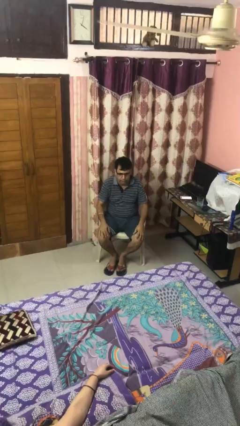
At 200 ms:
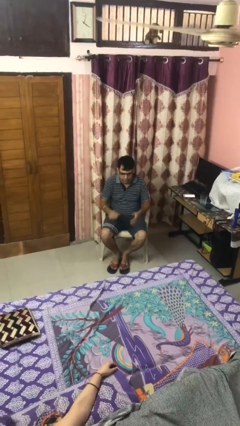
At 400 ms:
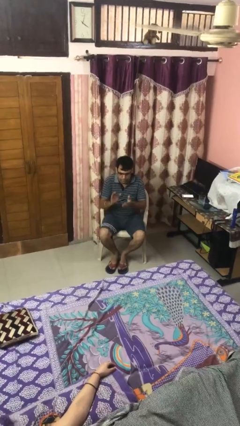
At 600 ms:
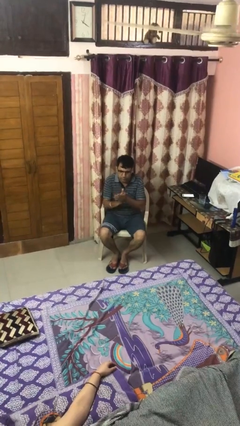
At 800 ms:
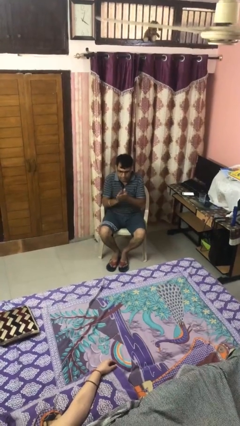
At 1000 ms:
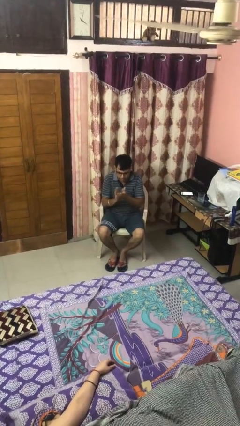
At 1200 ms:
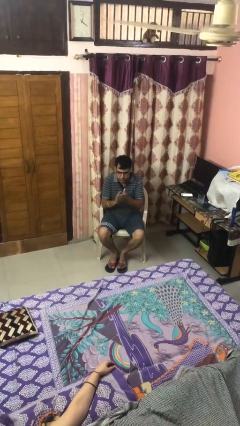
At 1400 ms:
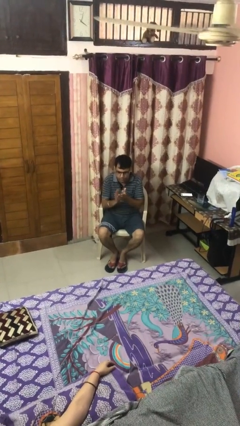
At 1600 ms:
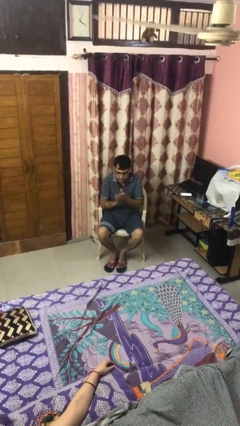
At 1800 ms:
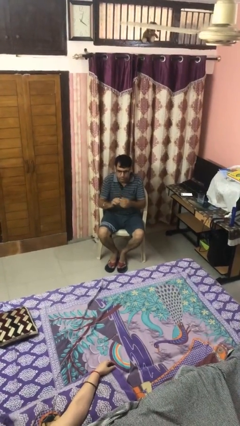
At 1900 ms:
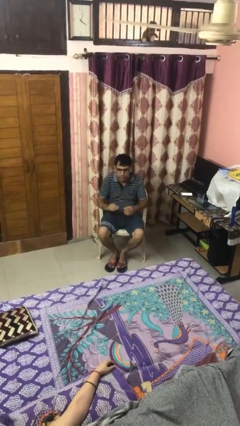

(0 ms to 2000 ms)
person claps hands

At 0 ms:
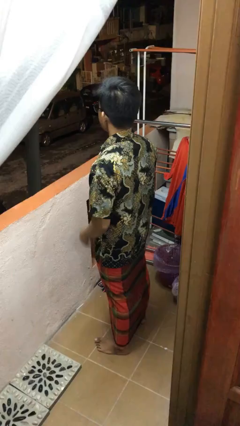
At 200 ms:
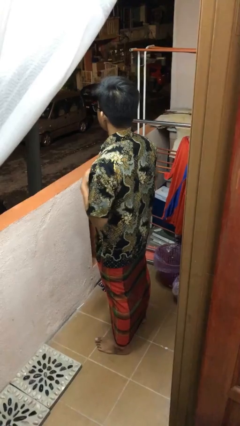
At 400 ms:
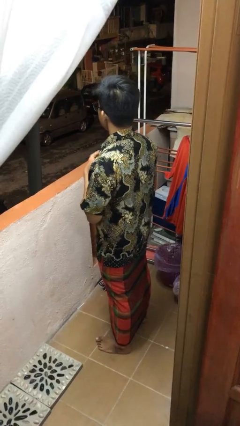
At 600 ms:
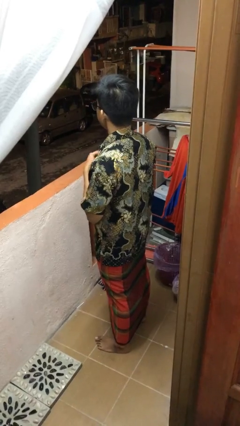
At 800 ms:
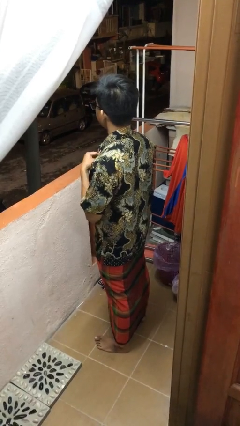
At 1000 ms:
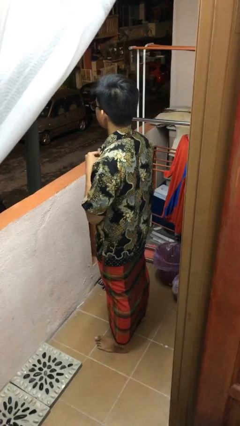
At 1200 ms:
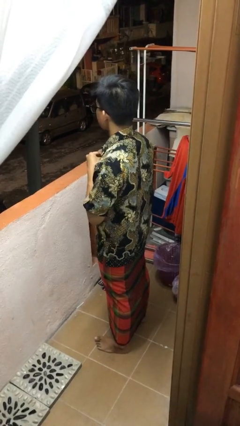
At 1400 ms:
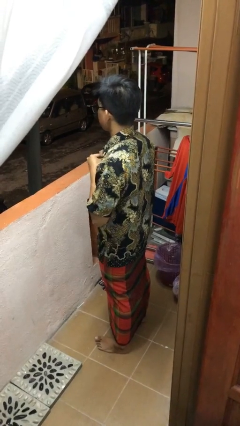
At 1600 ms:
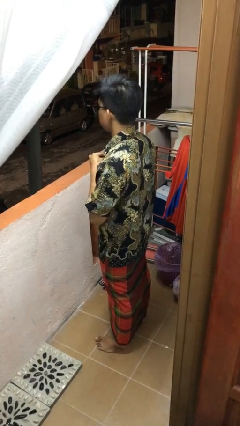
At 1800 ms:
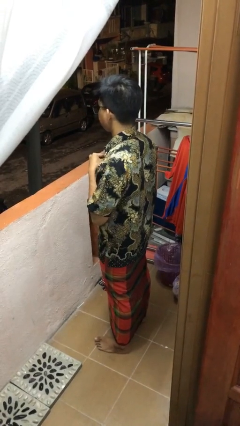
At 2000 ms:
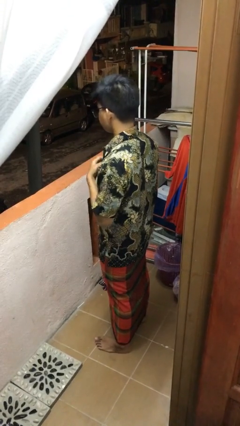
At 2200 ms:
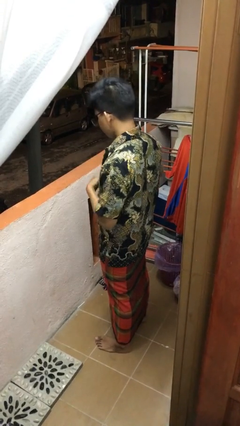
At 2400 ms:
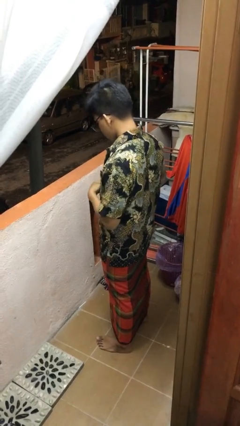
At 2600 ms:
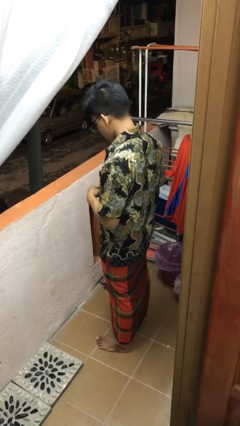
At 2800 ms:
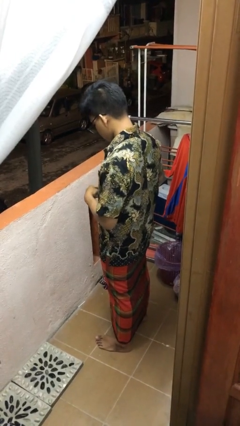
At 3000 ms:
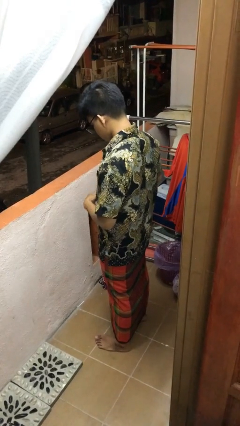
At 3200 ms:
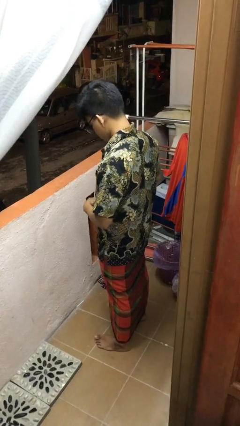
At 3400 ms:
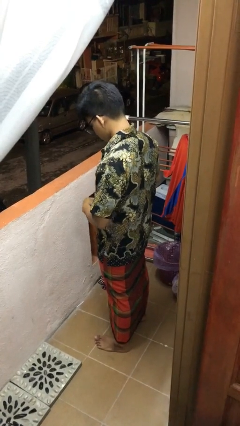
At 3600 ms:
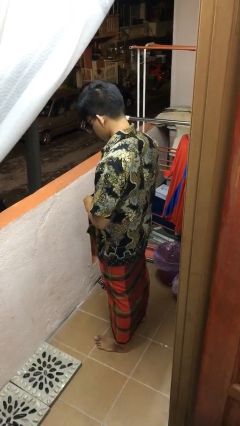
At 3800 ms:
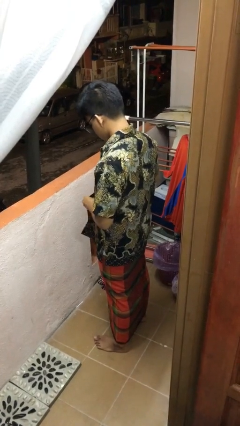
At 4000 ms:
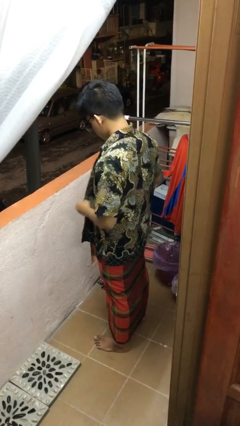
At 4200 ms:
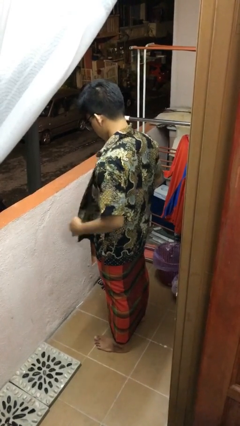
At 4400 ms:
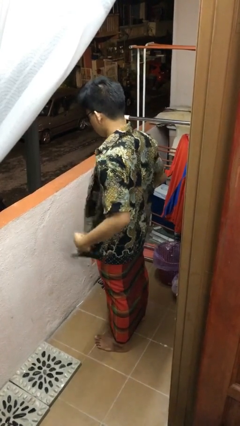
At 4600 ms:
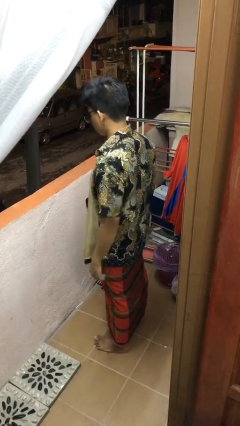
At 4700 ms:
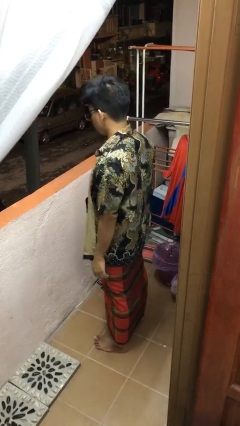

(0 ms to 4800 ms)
person unbuttons shirt

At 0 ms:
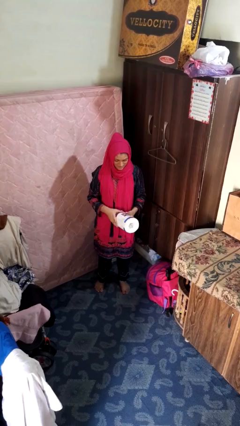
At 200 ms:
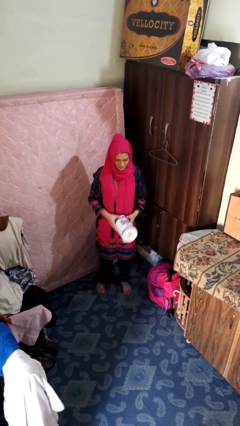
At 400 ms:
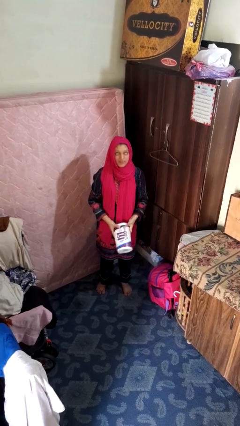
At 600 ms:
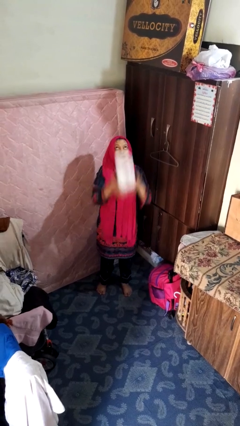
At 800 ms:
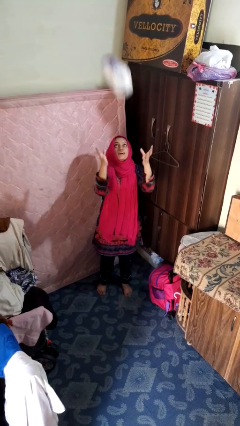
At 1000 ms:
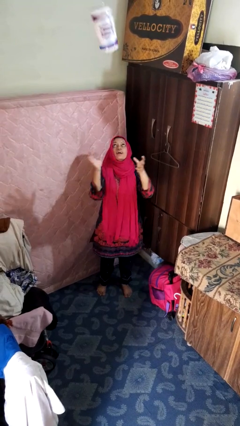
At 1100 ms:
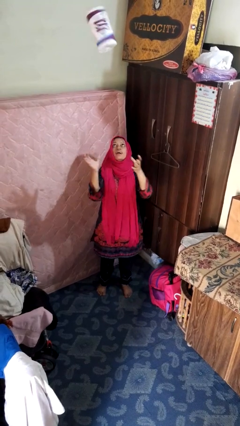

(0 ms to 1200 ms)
person drops object

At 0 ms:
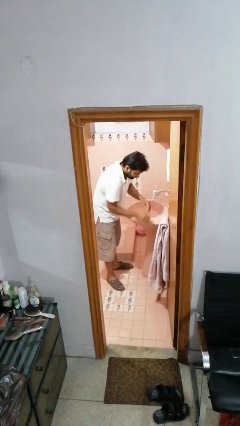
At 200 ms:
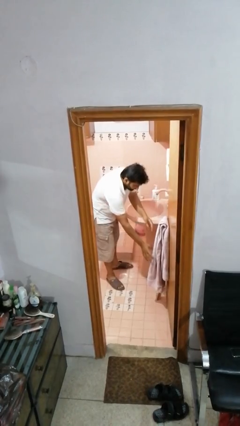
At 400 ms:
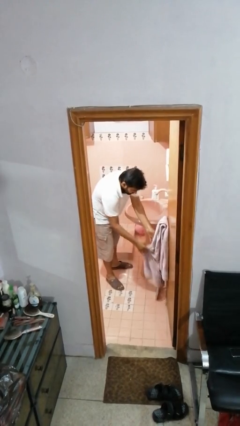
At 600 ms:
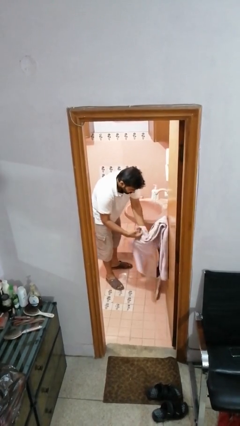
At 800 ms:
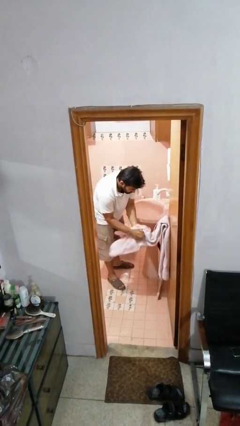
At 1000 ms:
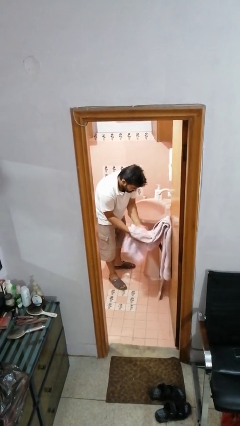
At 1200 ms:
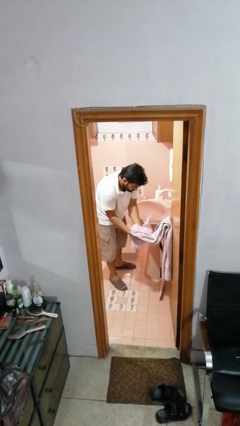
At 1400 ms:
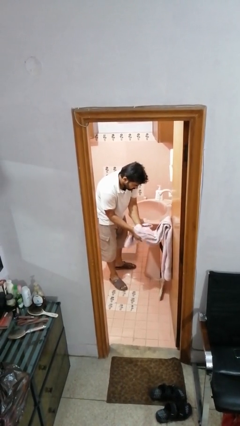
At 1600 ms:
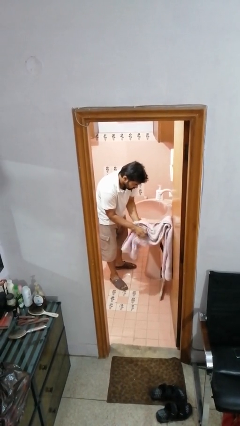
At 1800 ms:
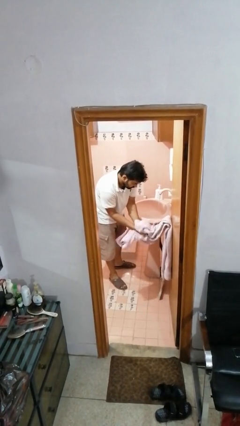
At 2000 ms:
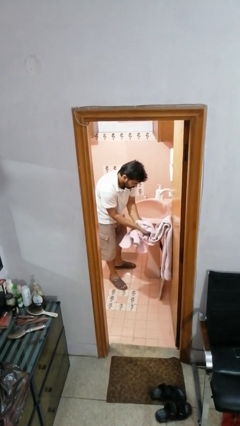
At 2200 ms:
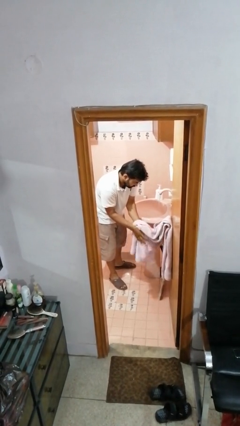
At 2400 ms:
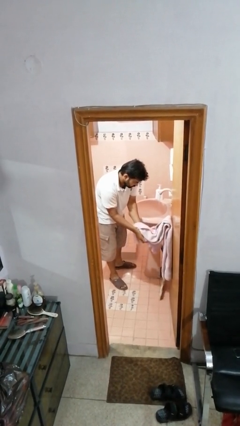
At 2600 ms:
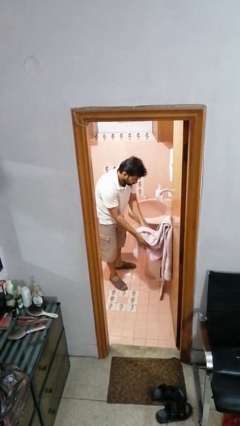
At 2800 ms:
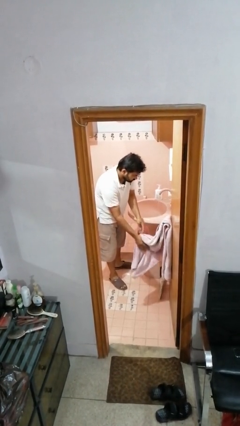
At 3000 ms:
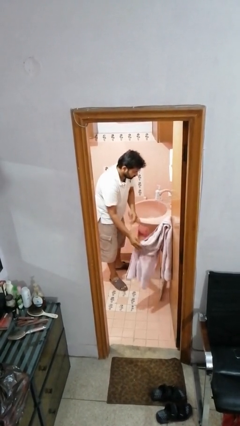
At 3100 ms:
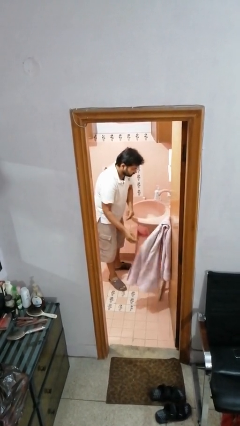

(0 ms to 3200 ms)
person dries hands with towel

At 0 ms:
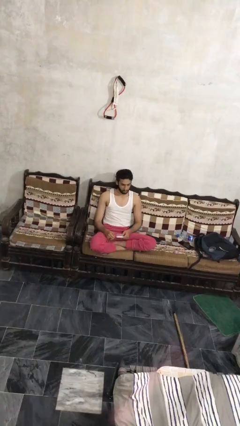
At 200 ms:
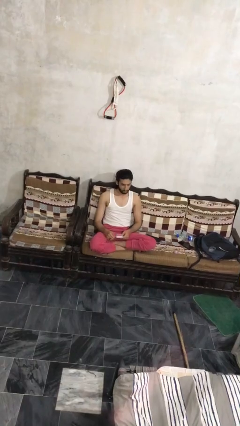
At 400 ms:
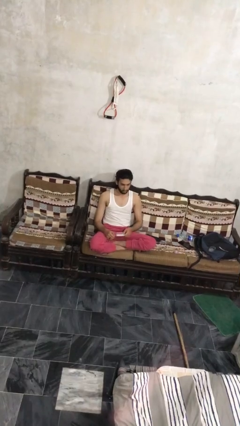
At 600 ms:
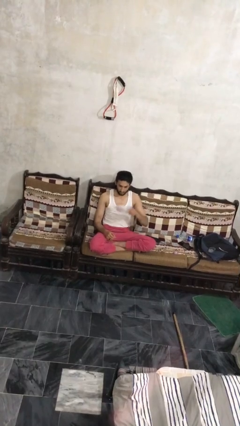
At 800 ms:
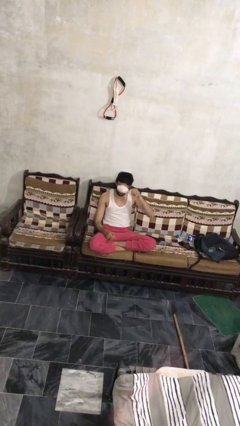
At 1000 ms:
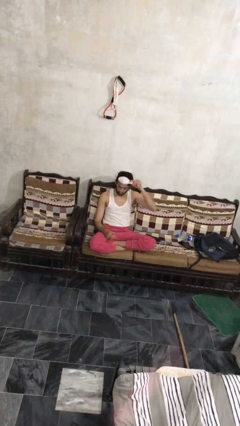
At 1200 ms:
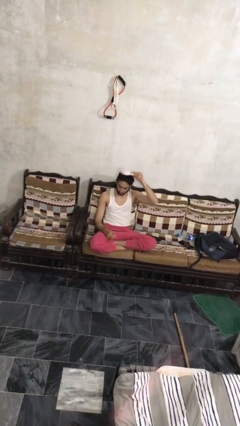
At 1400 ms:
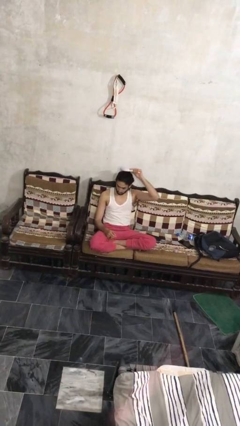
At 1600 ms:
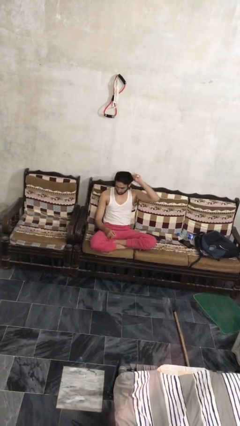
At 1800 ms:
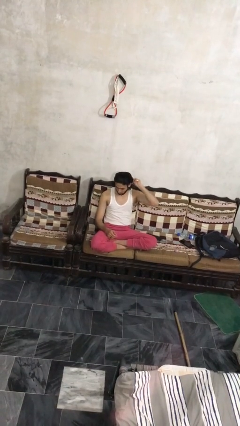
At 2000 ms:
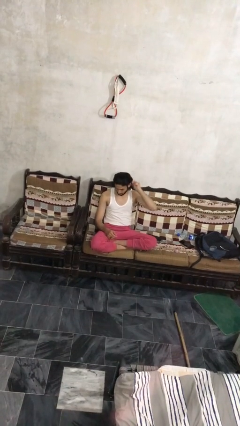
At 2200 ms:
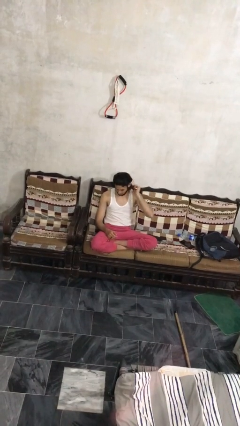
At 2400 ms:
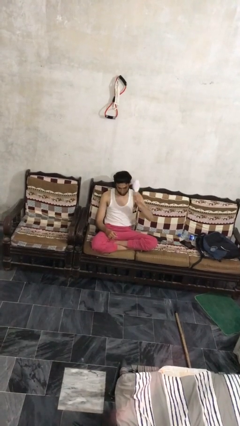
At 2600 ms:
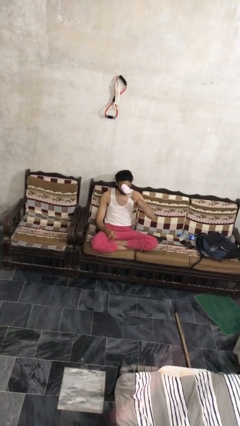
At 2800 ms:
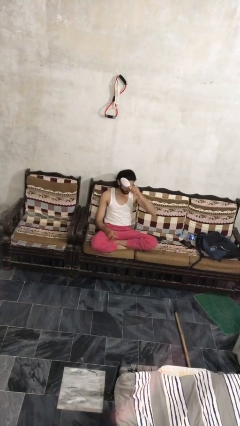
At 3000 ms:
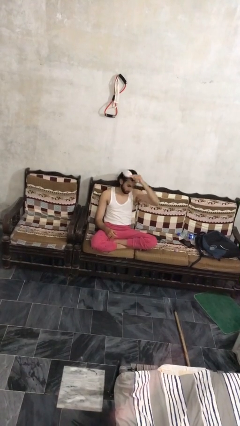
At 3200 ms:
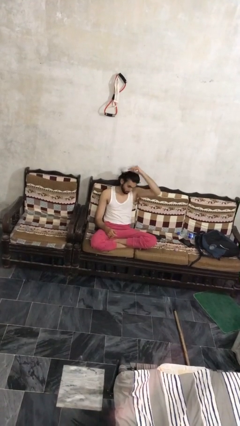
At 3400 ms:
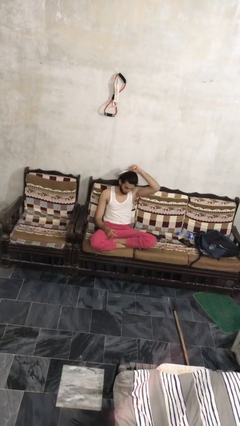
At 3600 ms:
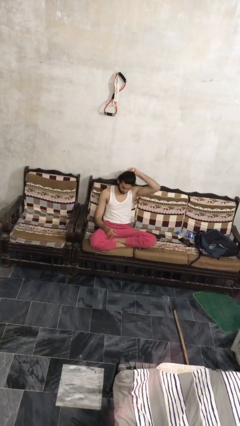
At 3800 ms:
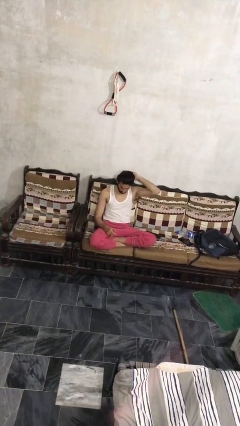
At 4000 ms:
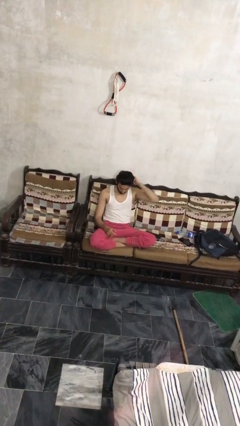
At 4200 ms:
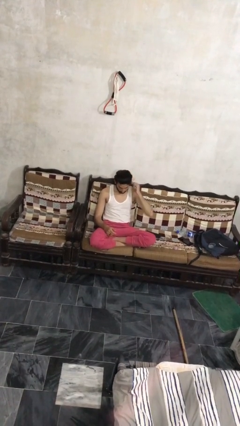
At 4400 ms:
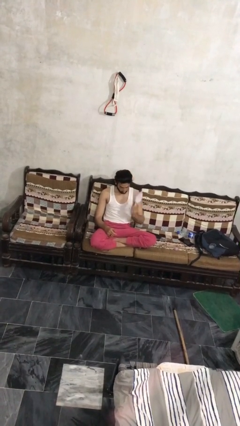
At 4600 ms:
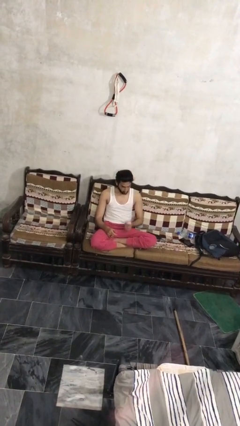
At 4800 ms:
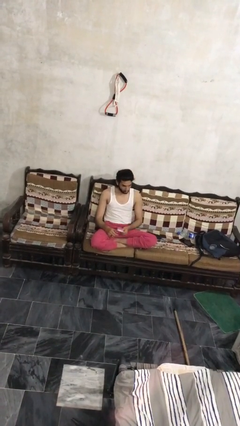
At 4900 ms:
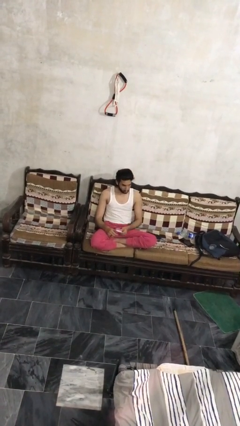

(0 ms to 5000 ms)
person brushes hair

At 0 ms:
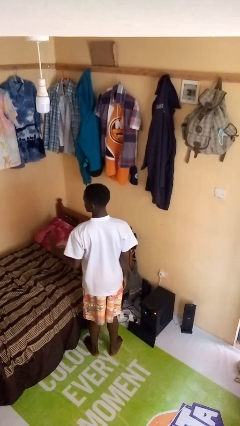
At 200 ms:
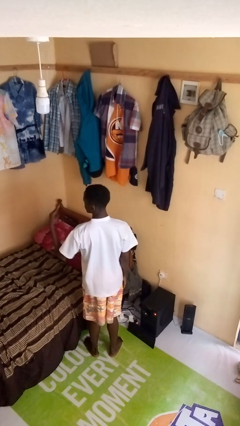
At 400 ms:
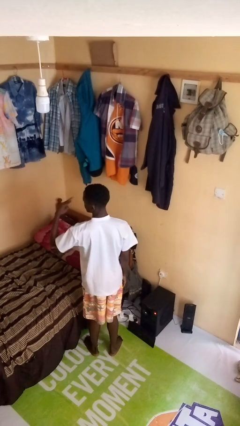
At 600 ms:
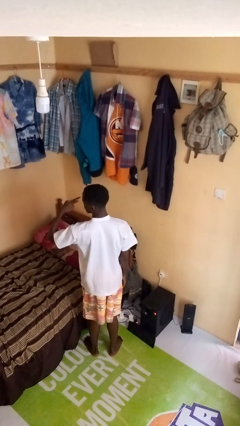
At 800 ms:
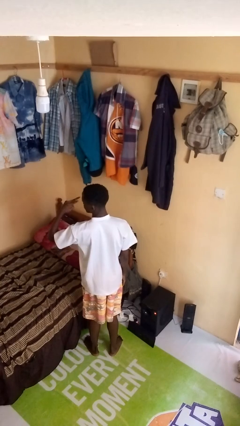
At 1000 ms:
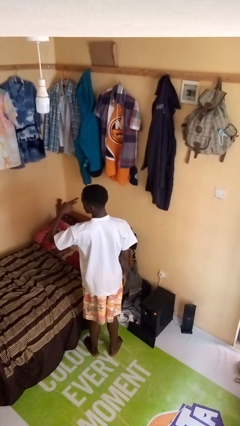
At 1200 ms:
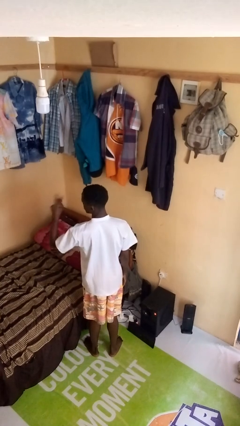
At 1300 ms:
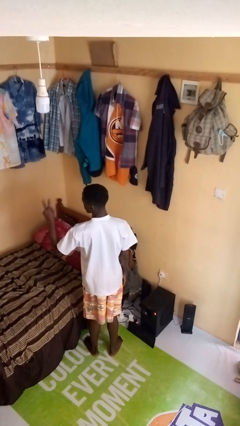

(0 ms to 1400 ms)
person gestures watch closely
